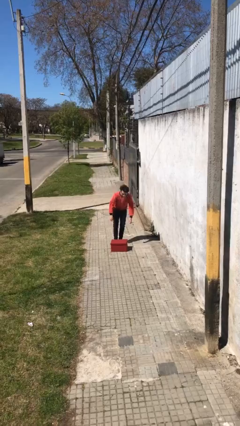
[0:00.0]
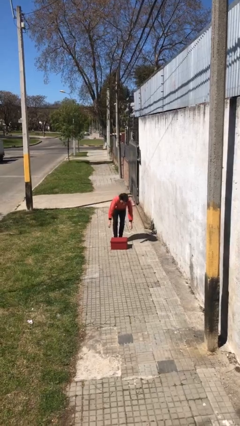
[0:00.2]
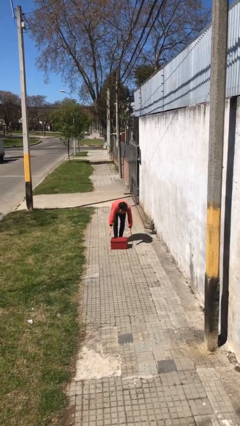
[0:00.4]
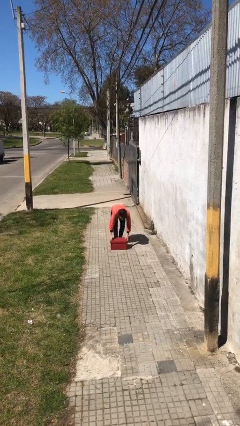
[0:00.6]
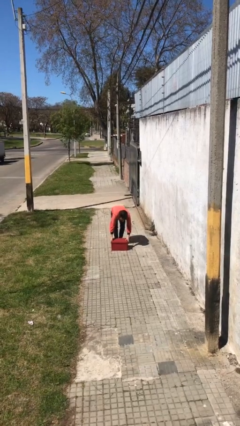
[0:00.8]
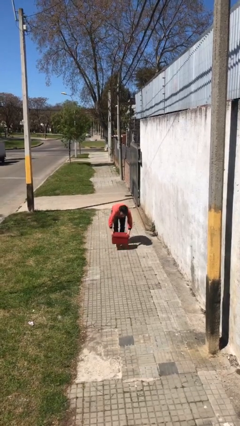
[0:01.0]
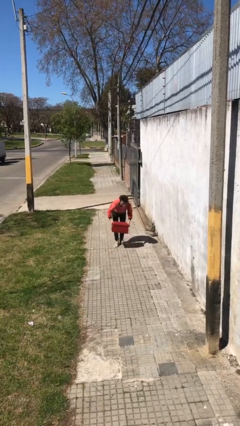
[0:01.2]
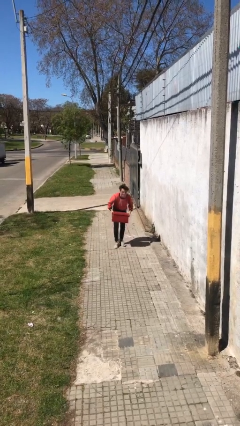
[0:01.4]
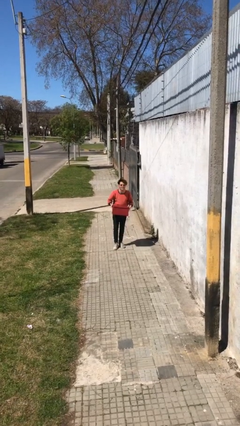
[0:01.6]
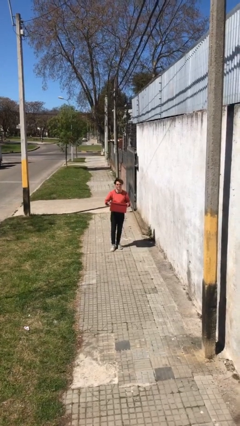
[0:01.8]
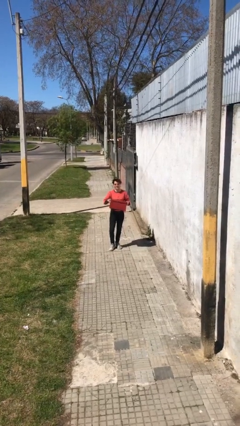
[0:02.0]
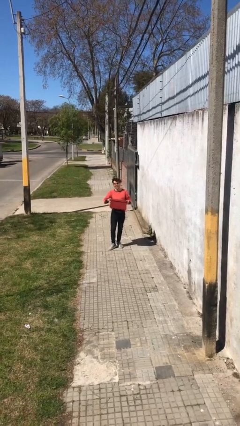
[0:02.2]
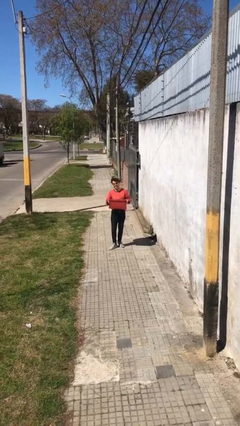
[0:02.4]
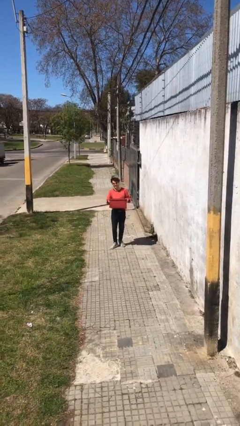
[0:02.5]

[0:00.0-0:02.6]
person picks up object from floor

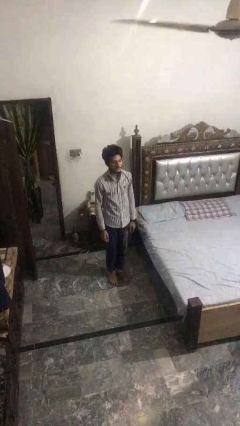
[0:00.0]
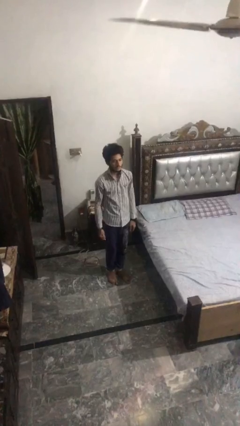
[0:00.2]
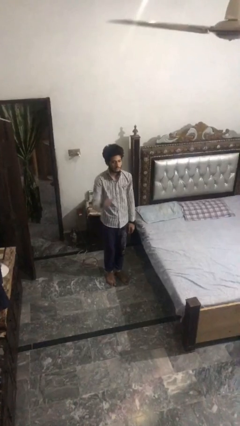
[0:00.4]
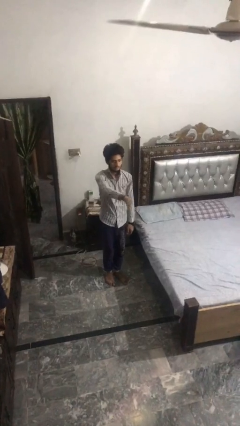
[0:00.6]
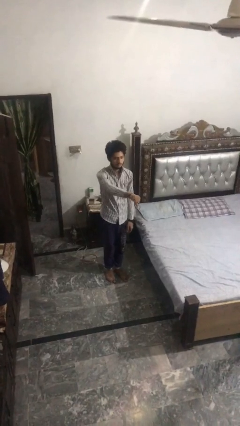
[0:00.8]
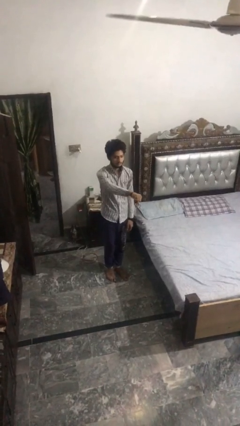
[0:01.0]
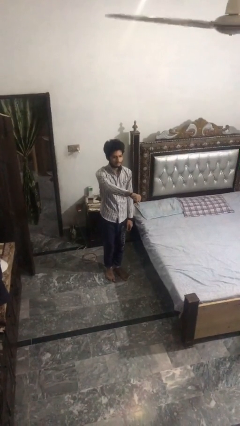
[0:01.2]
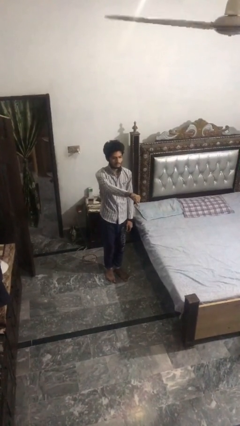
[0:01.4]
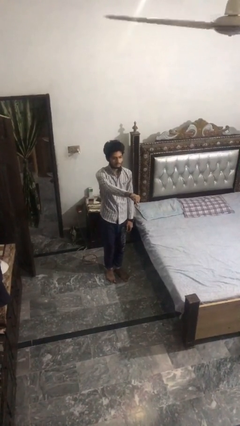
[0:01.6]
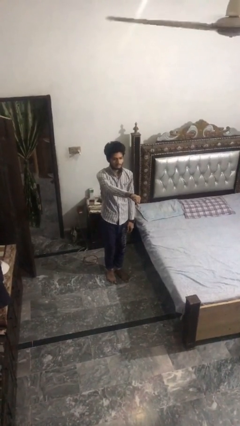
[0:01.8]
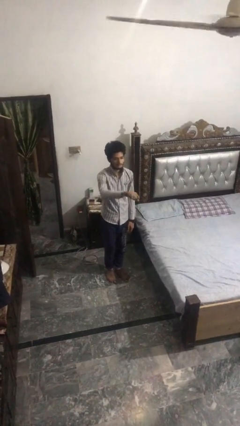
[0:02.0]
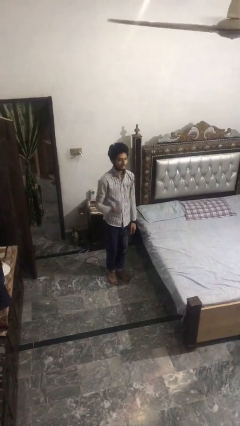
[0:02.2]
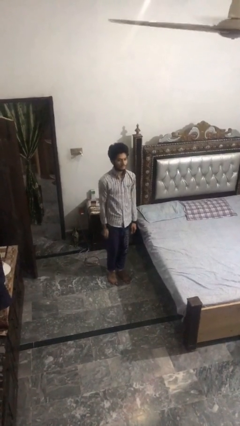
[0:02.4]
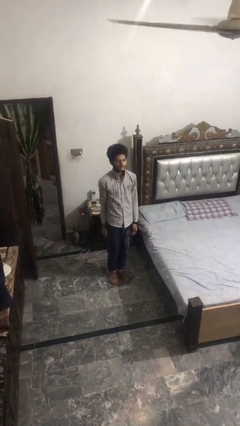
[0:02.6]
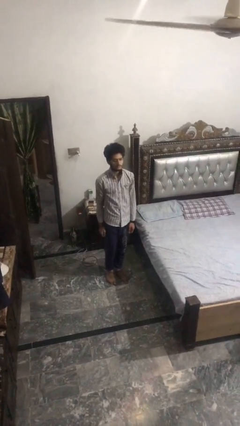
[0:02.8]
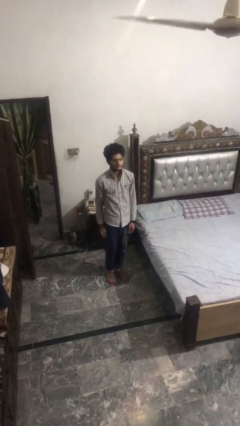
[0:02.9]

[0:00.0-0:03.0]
person gestures thumbs down

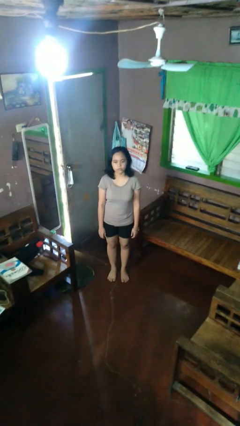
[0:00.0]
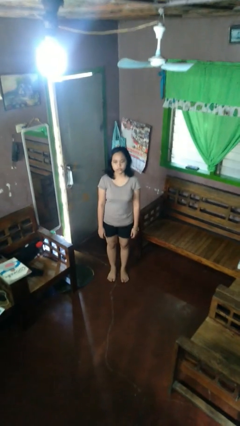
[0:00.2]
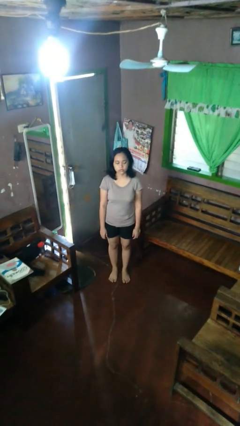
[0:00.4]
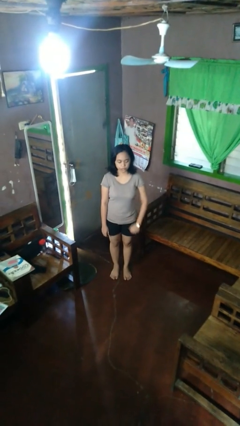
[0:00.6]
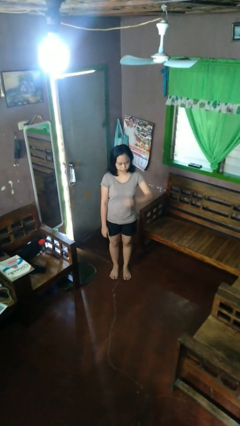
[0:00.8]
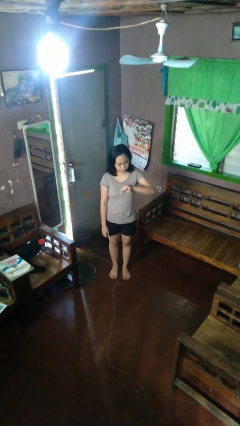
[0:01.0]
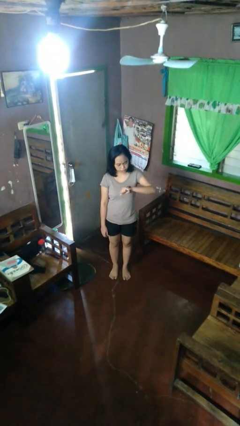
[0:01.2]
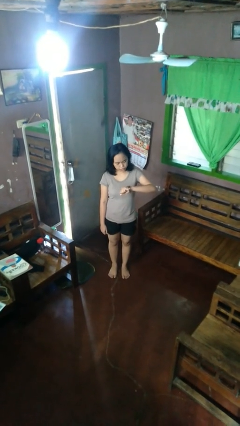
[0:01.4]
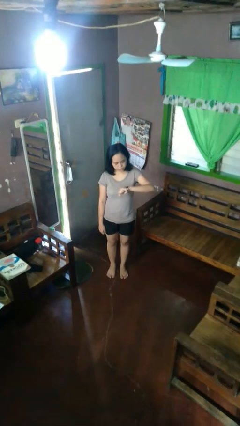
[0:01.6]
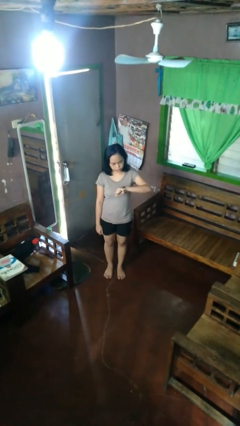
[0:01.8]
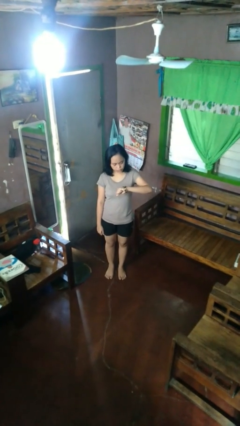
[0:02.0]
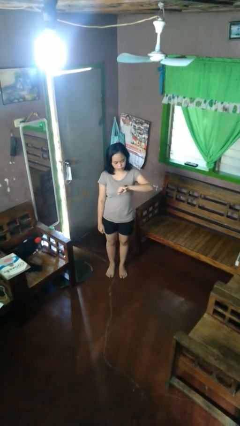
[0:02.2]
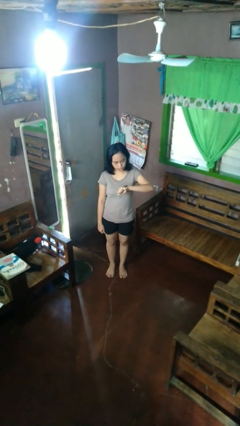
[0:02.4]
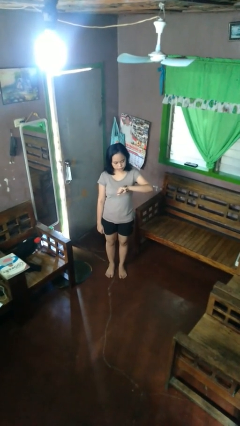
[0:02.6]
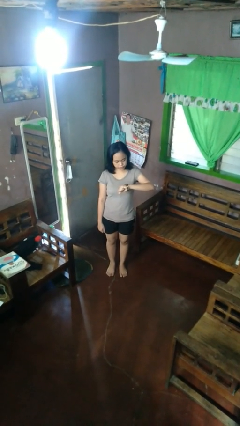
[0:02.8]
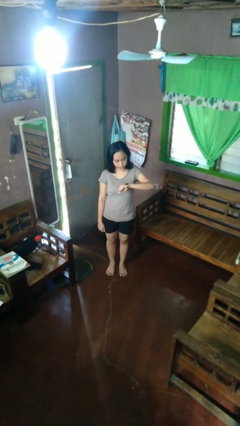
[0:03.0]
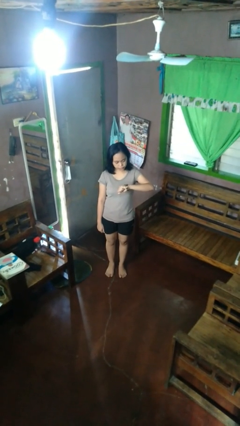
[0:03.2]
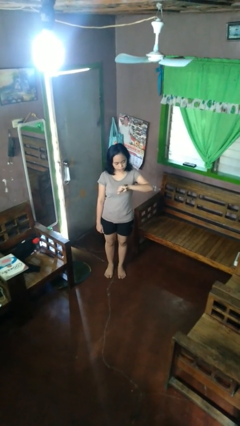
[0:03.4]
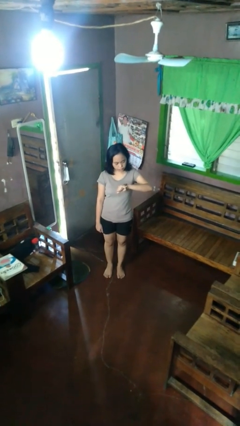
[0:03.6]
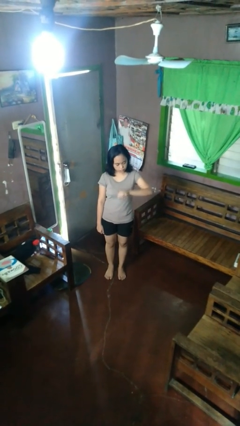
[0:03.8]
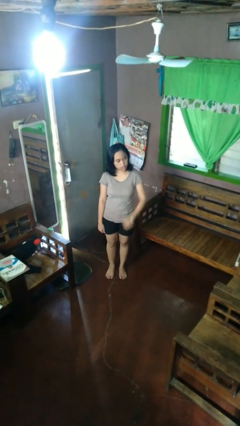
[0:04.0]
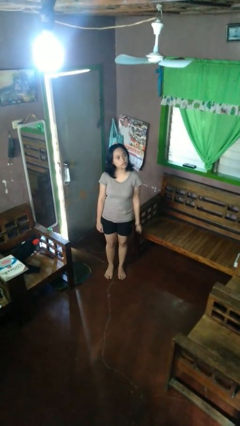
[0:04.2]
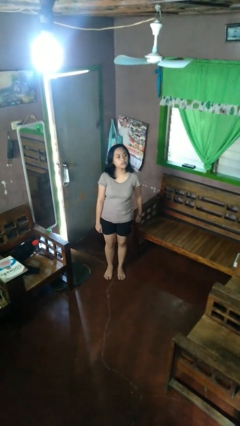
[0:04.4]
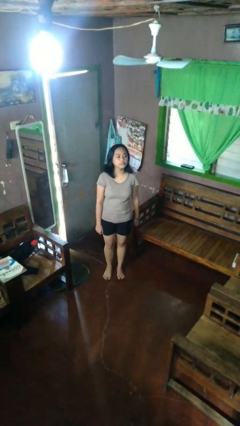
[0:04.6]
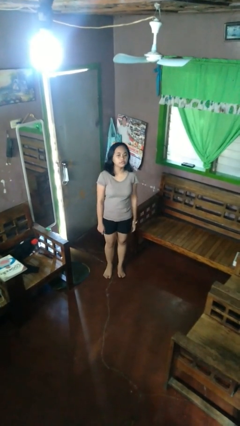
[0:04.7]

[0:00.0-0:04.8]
person looks at wristwatch

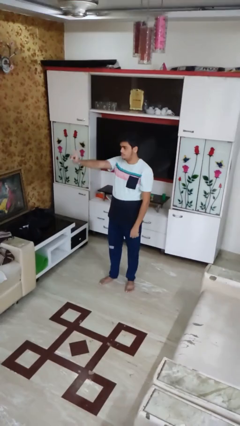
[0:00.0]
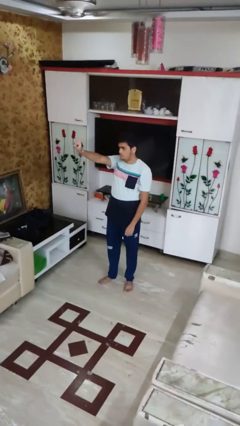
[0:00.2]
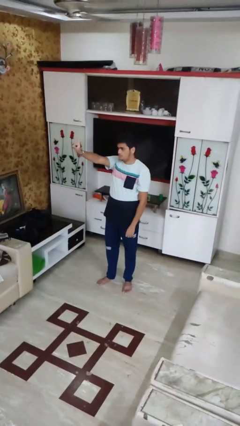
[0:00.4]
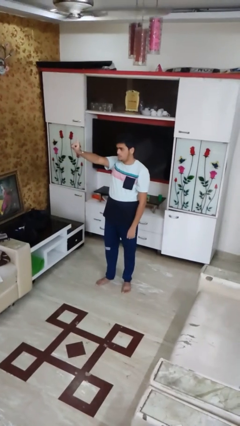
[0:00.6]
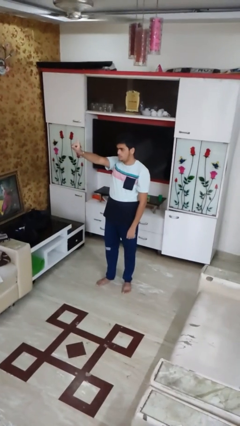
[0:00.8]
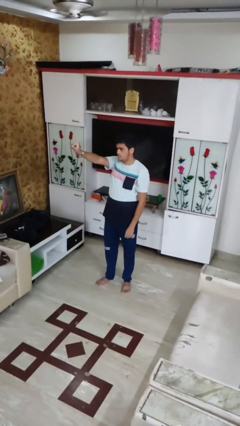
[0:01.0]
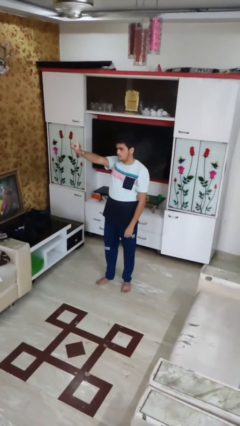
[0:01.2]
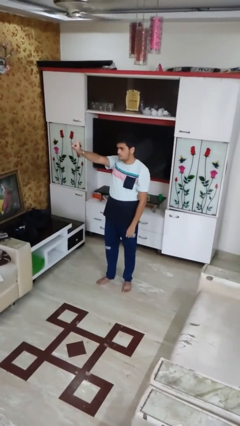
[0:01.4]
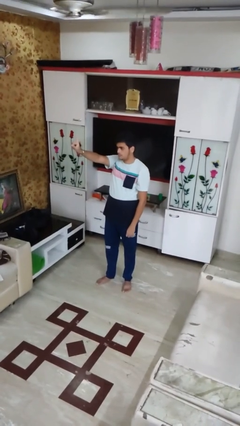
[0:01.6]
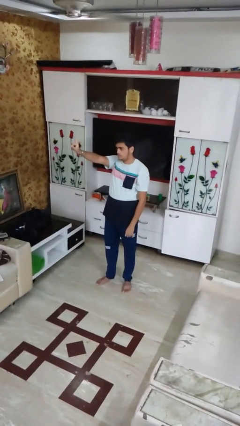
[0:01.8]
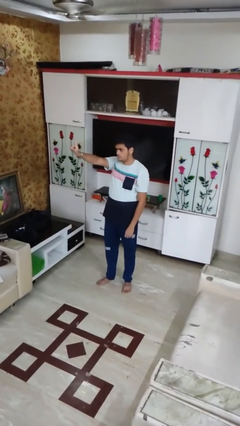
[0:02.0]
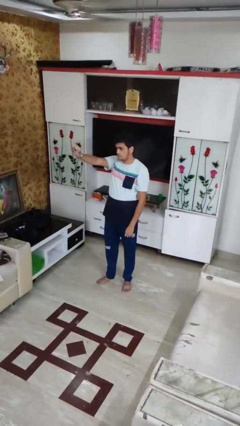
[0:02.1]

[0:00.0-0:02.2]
person gestures number one

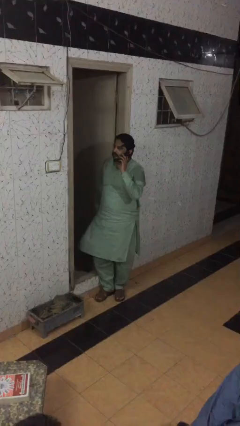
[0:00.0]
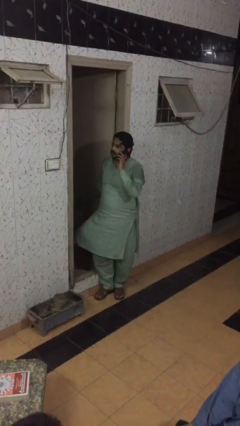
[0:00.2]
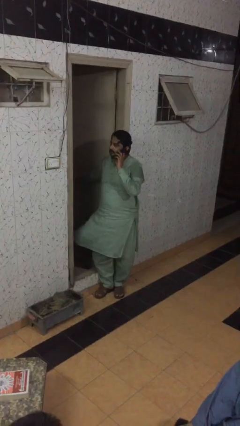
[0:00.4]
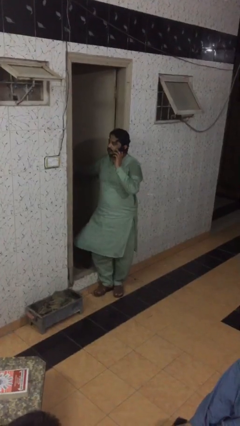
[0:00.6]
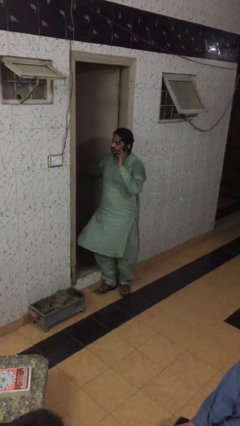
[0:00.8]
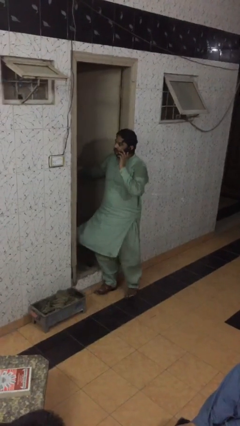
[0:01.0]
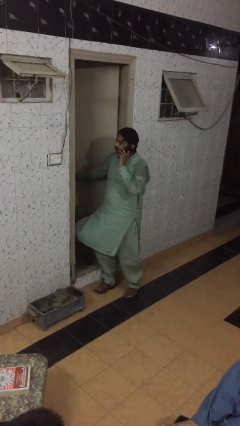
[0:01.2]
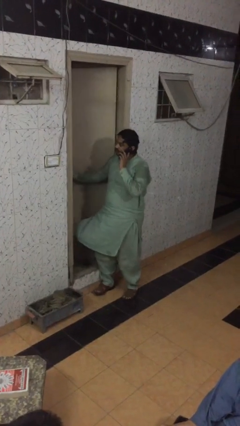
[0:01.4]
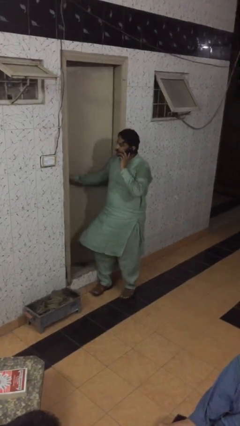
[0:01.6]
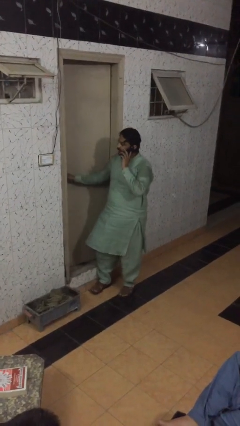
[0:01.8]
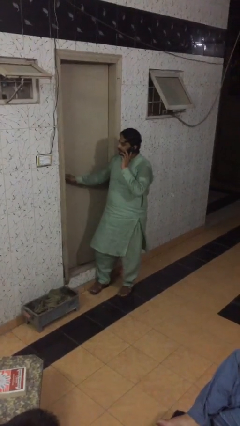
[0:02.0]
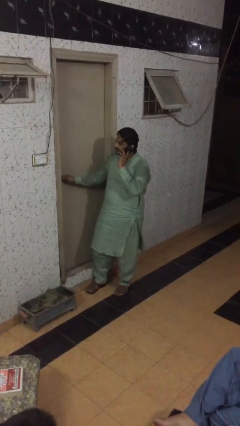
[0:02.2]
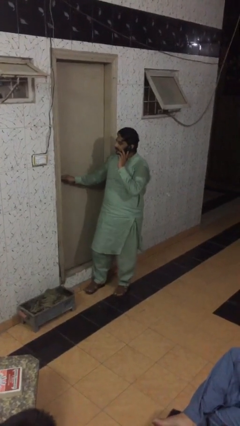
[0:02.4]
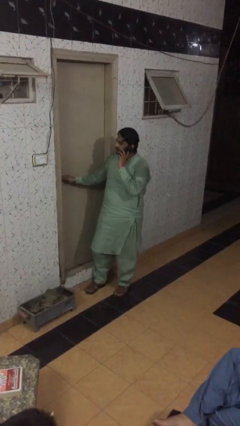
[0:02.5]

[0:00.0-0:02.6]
person closes facility door

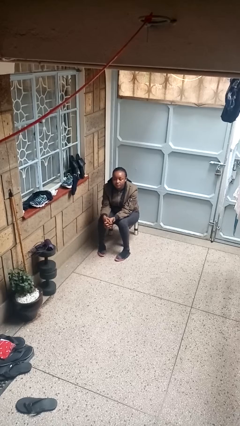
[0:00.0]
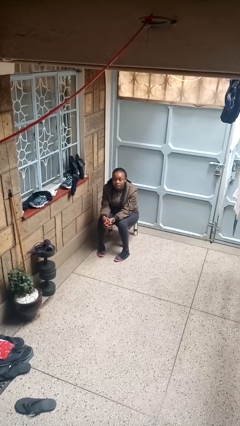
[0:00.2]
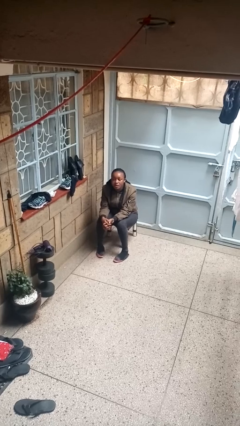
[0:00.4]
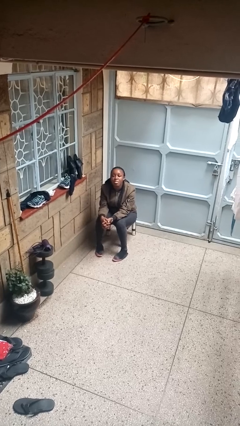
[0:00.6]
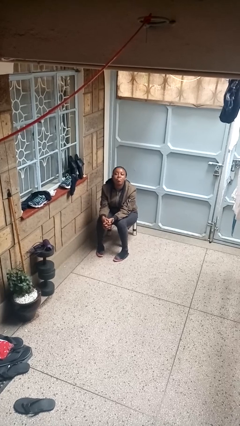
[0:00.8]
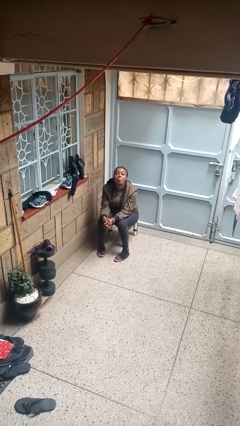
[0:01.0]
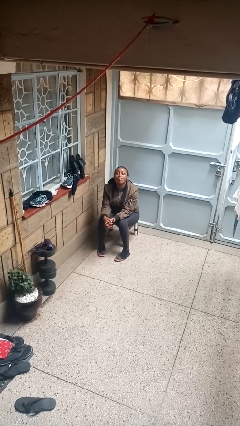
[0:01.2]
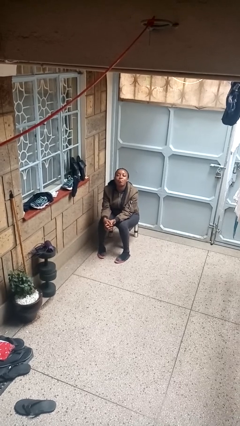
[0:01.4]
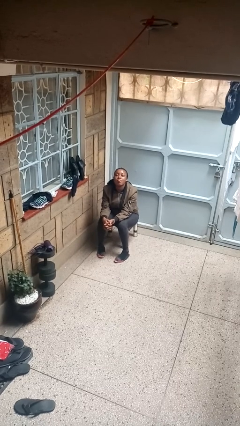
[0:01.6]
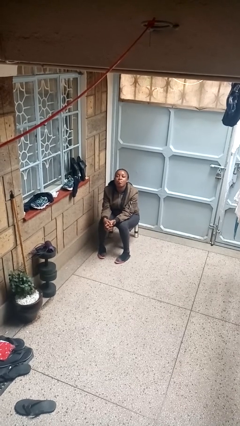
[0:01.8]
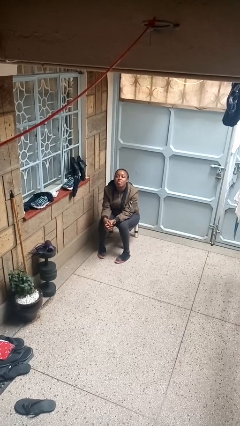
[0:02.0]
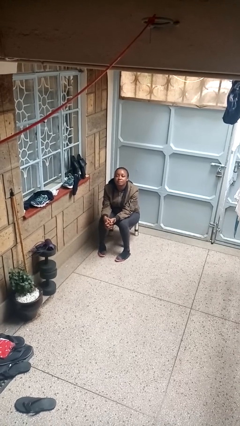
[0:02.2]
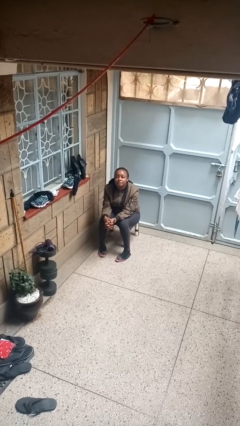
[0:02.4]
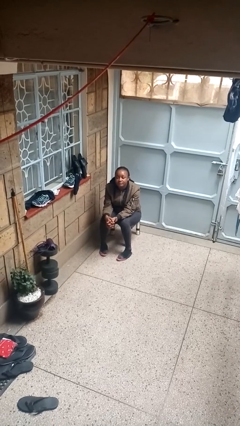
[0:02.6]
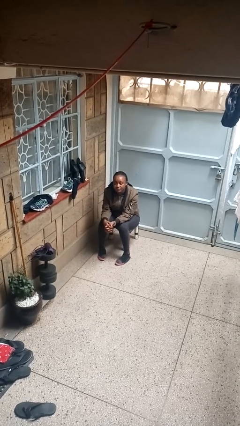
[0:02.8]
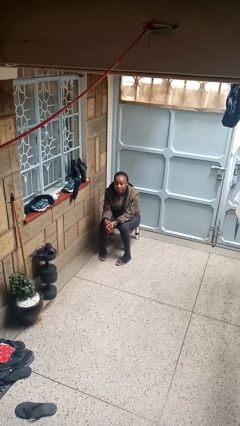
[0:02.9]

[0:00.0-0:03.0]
person sticks out tongue
